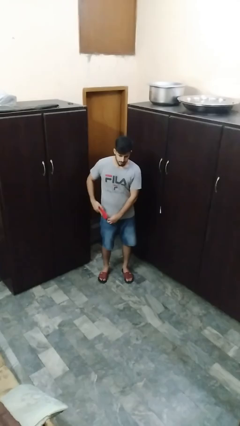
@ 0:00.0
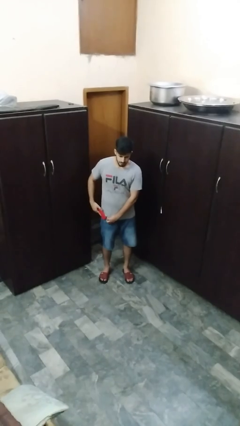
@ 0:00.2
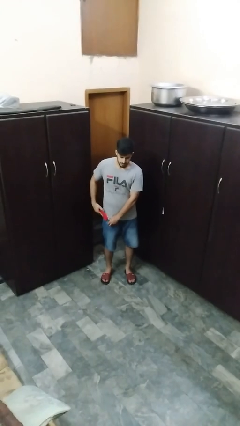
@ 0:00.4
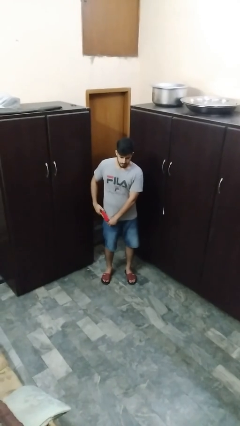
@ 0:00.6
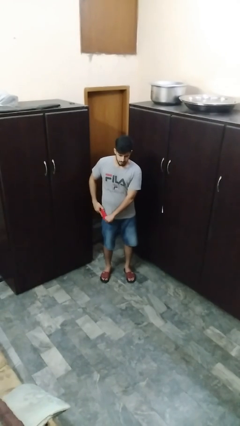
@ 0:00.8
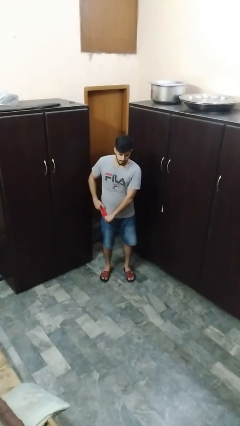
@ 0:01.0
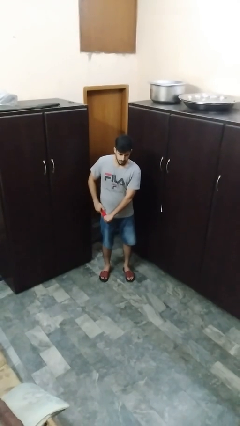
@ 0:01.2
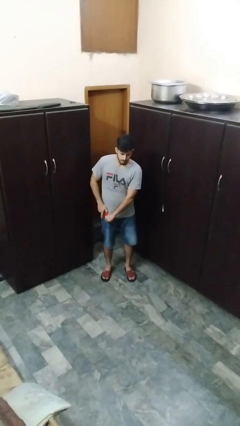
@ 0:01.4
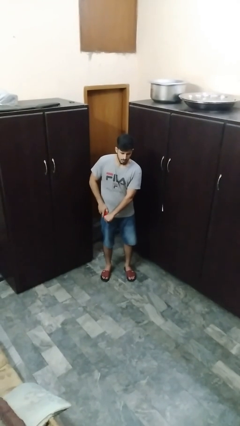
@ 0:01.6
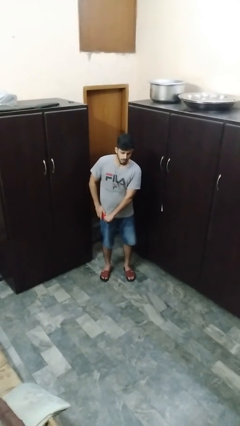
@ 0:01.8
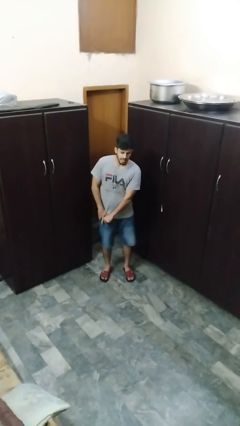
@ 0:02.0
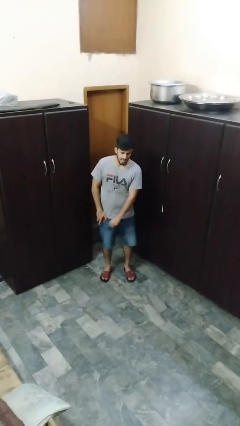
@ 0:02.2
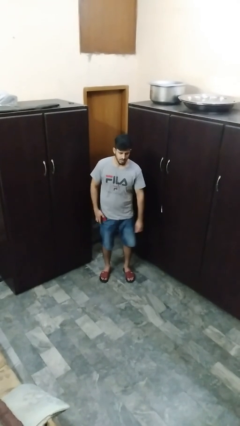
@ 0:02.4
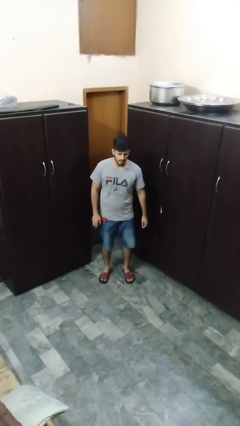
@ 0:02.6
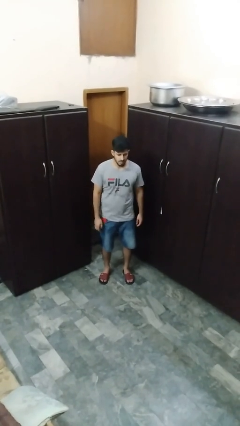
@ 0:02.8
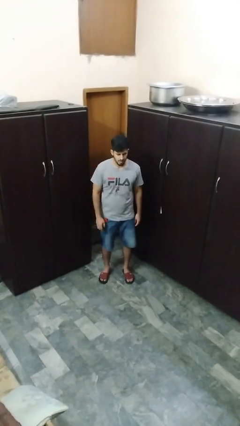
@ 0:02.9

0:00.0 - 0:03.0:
person puts phone into pocket

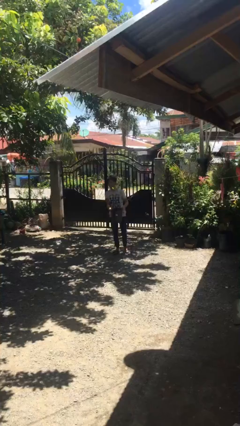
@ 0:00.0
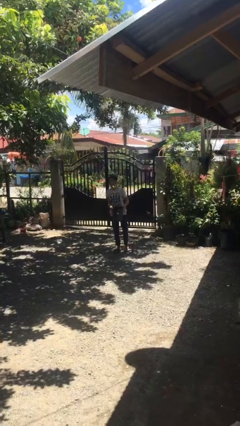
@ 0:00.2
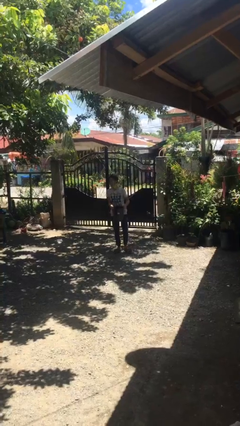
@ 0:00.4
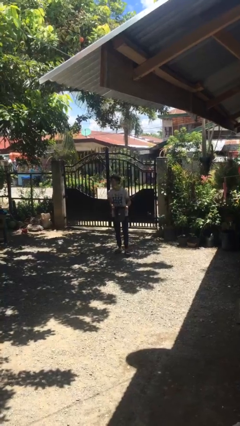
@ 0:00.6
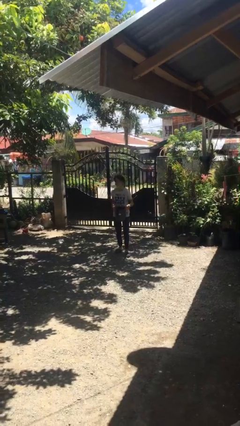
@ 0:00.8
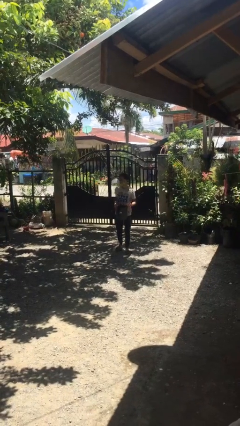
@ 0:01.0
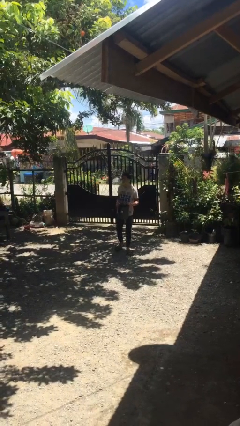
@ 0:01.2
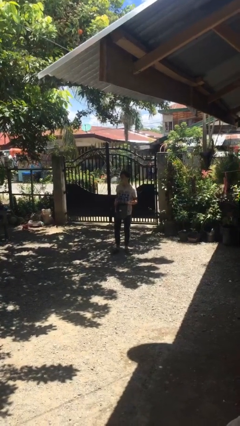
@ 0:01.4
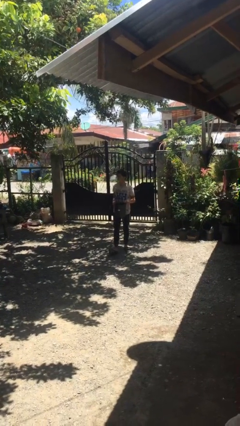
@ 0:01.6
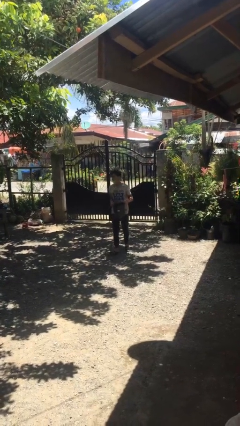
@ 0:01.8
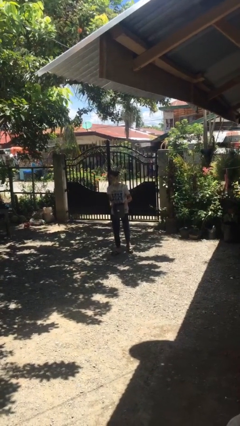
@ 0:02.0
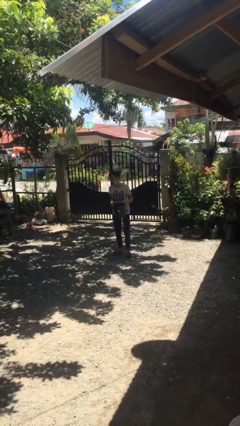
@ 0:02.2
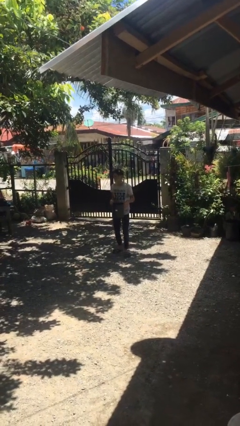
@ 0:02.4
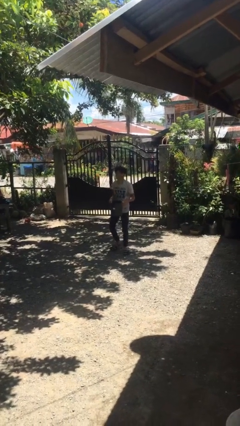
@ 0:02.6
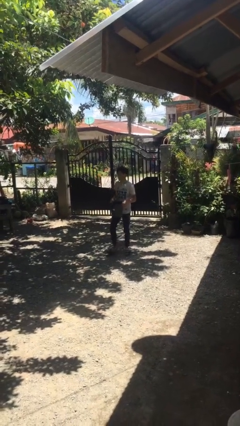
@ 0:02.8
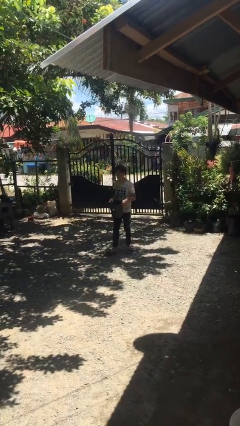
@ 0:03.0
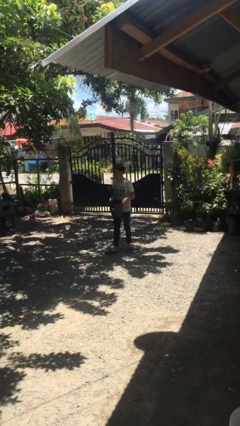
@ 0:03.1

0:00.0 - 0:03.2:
person carries heavy object

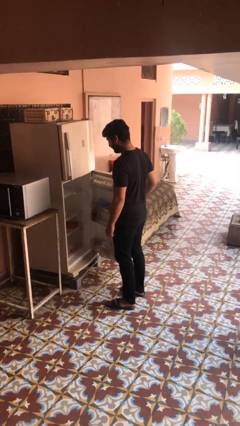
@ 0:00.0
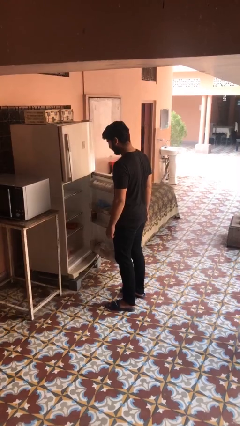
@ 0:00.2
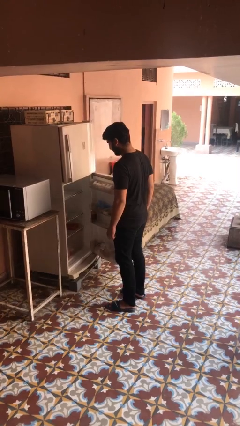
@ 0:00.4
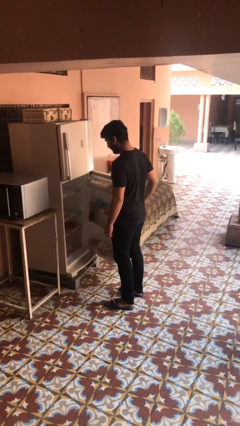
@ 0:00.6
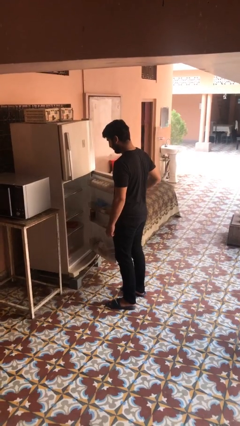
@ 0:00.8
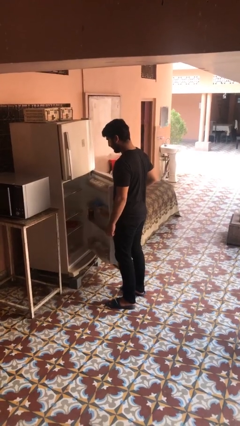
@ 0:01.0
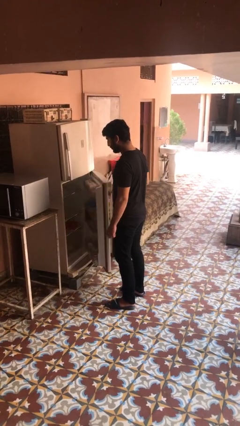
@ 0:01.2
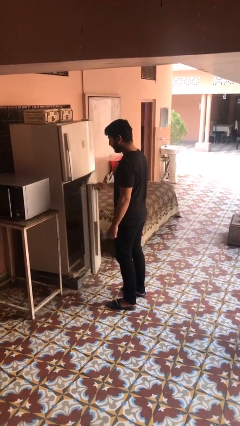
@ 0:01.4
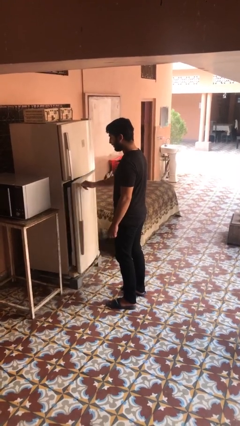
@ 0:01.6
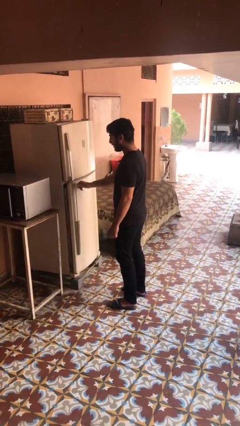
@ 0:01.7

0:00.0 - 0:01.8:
person closes refrigerator

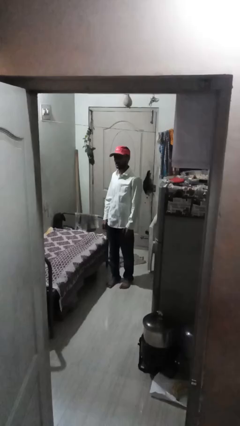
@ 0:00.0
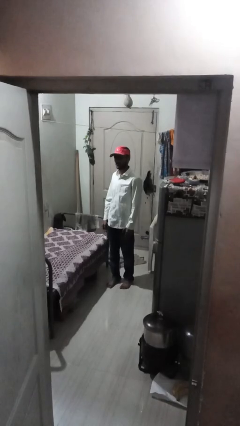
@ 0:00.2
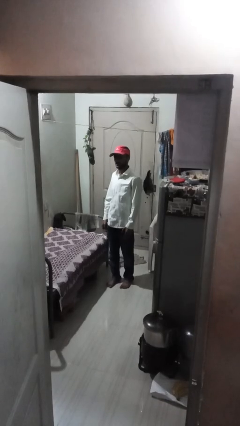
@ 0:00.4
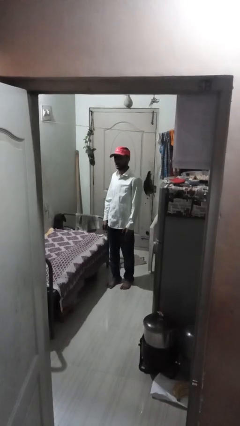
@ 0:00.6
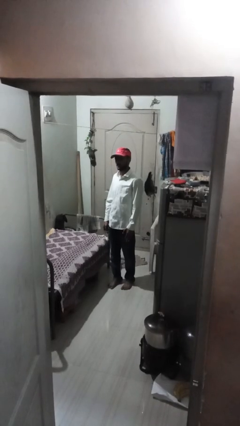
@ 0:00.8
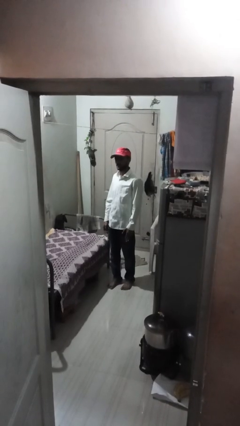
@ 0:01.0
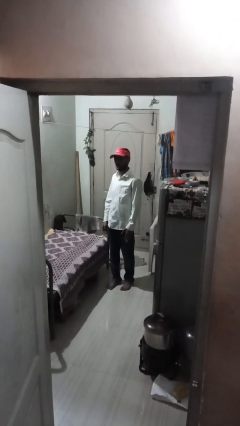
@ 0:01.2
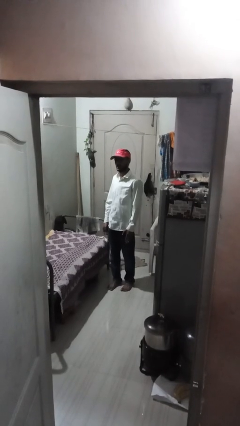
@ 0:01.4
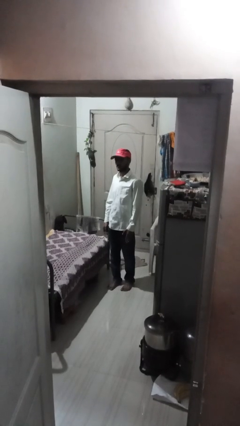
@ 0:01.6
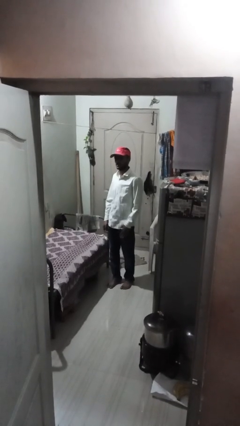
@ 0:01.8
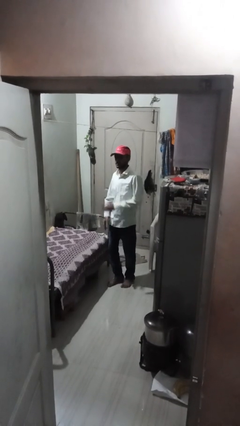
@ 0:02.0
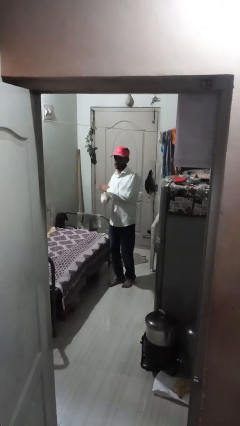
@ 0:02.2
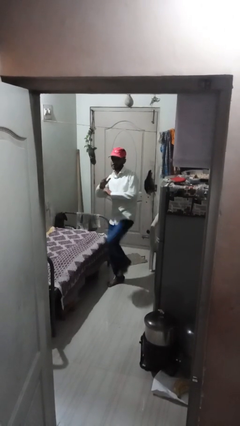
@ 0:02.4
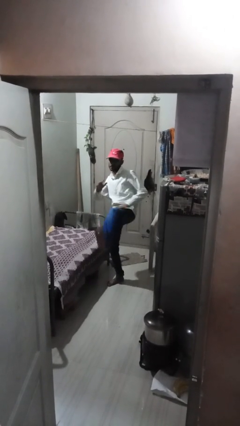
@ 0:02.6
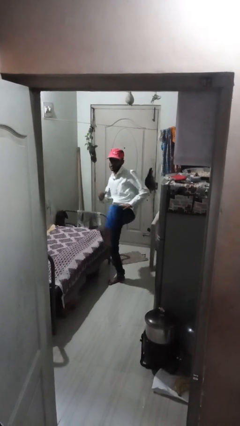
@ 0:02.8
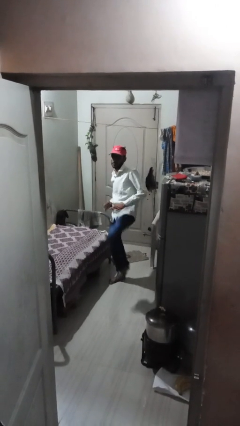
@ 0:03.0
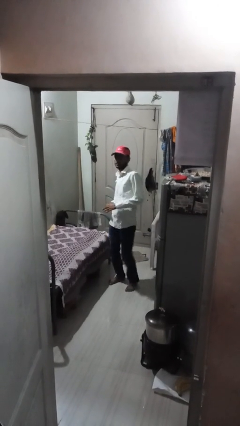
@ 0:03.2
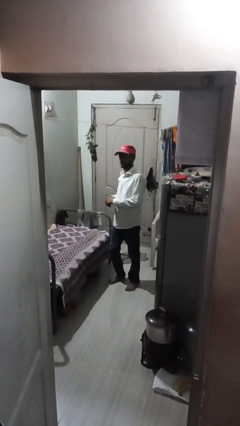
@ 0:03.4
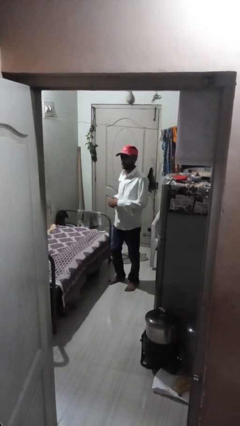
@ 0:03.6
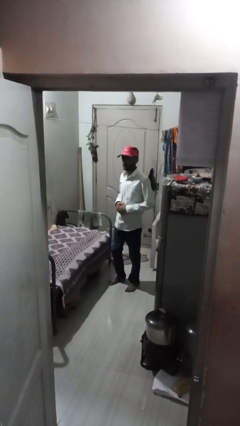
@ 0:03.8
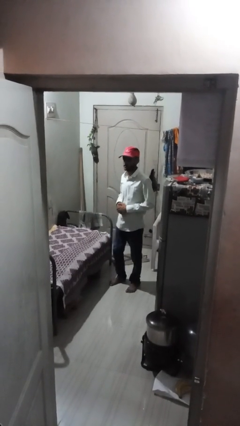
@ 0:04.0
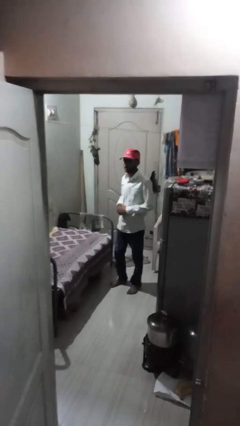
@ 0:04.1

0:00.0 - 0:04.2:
person karate kicks

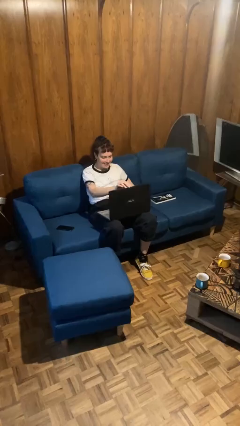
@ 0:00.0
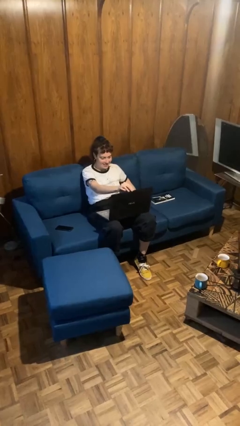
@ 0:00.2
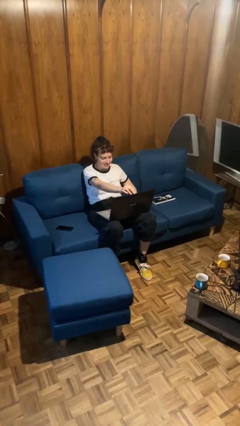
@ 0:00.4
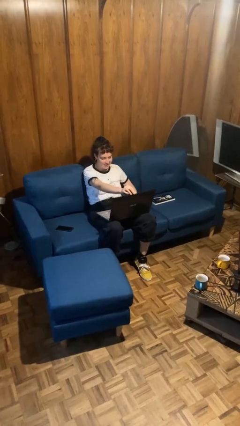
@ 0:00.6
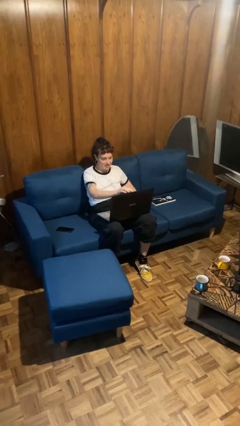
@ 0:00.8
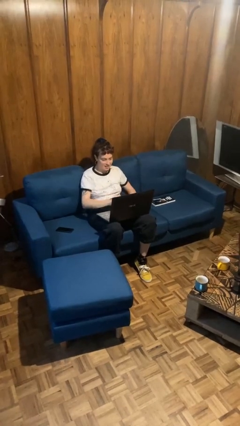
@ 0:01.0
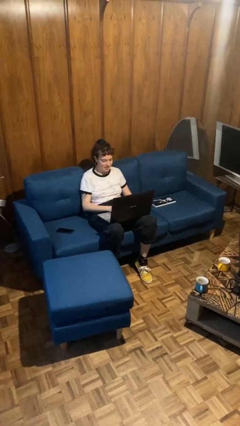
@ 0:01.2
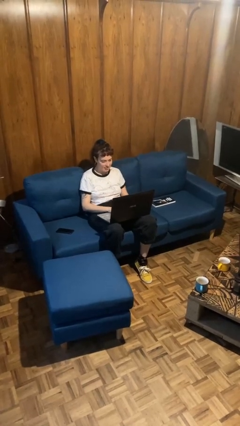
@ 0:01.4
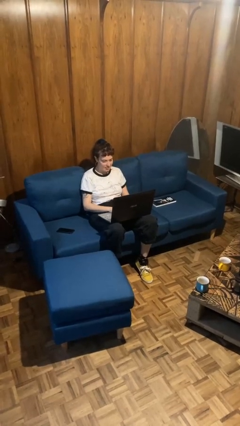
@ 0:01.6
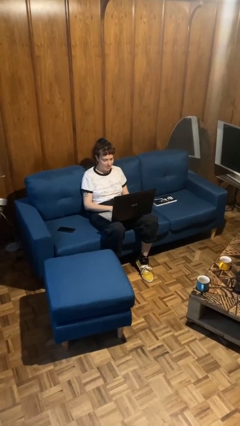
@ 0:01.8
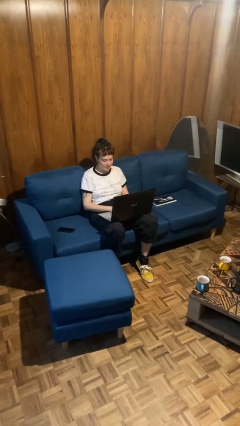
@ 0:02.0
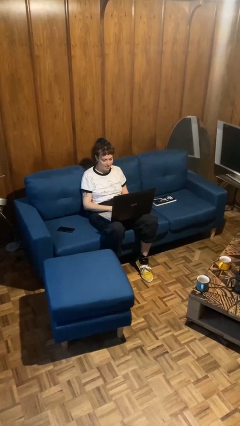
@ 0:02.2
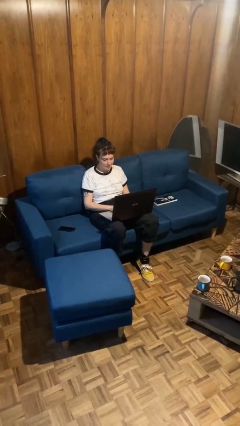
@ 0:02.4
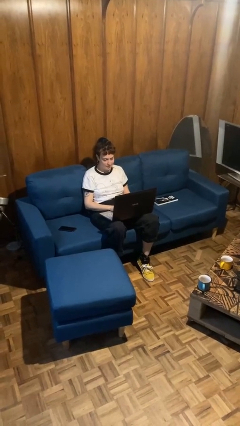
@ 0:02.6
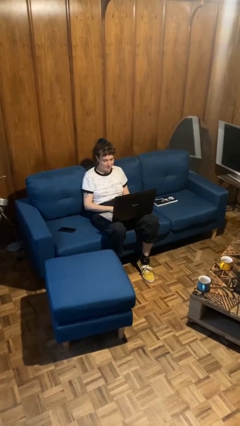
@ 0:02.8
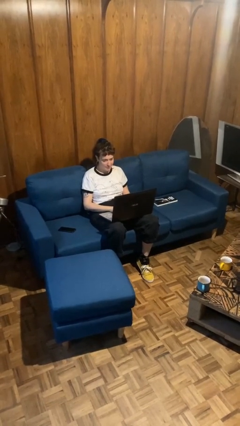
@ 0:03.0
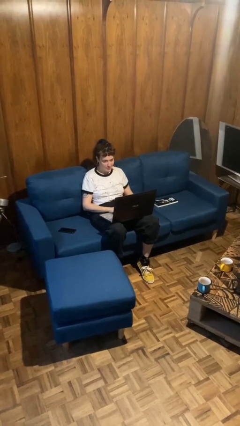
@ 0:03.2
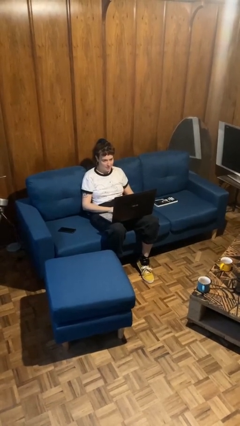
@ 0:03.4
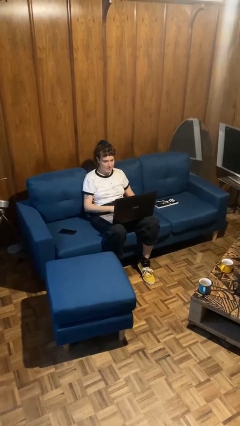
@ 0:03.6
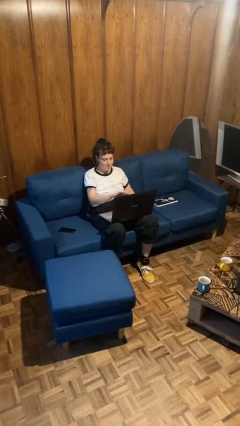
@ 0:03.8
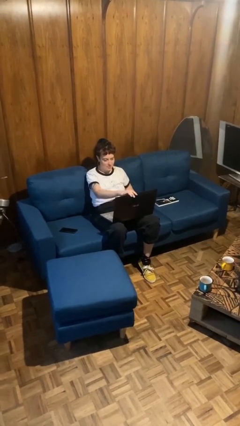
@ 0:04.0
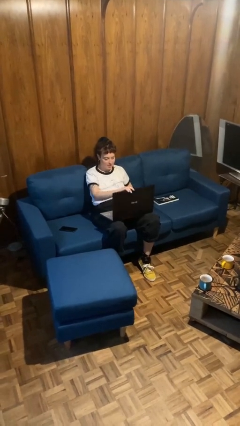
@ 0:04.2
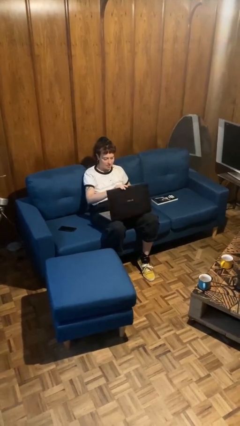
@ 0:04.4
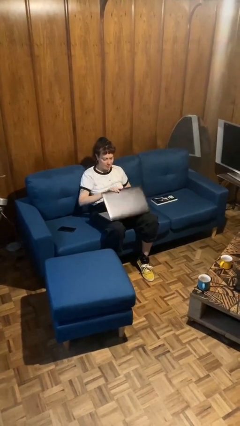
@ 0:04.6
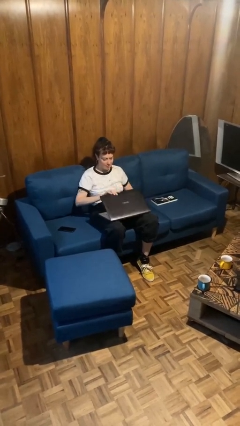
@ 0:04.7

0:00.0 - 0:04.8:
person interacts with laptop
